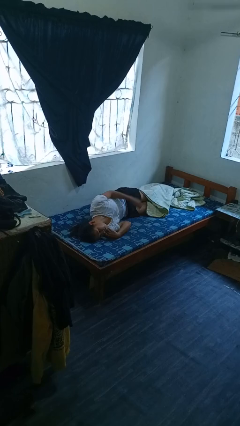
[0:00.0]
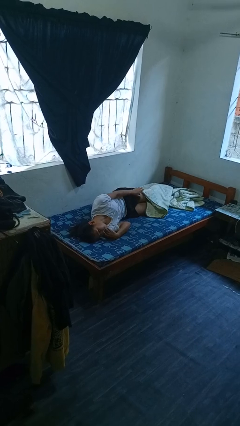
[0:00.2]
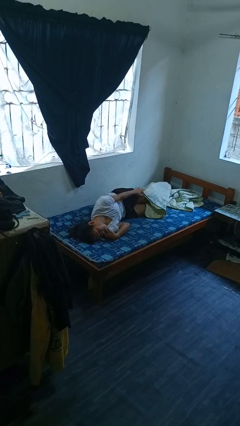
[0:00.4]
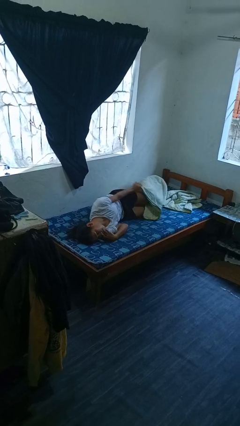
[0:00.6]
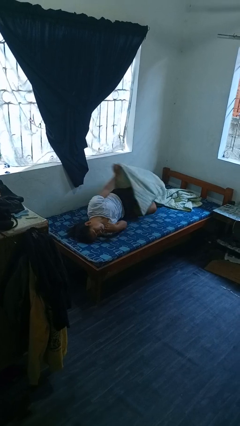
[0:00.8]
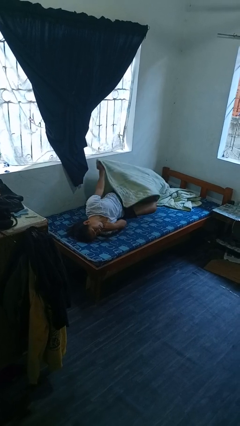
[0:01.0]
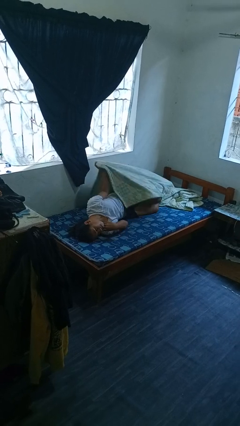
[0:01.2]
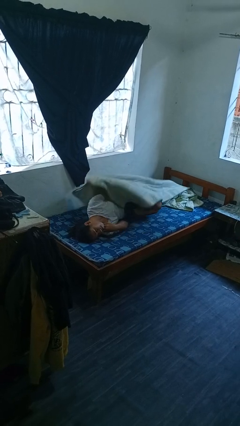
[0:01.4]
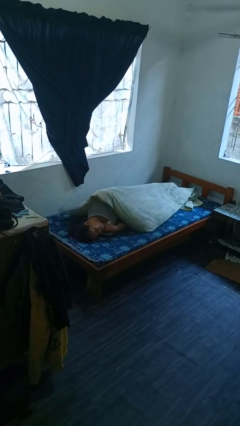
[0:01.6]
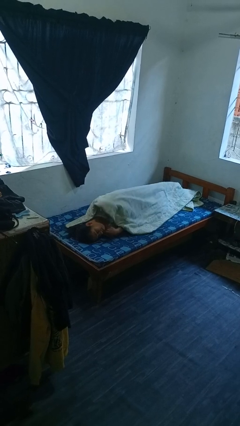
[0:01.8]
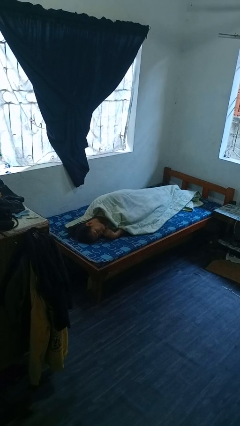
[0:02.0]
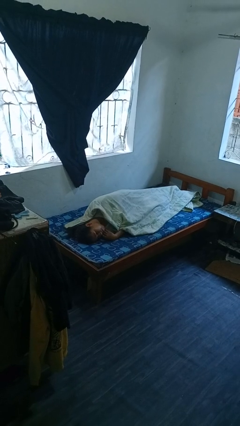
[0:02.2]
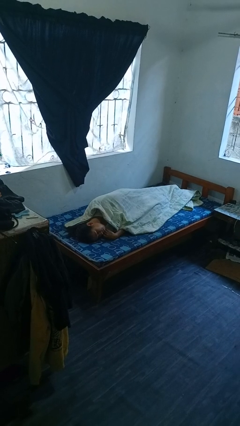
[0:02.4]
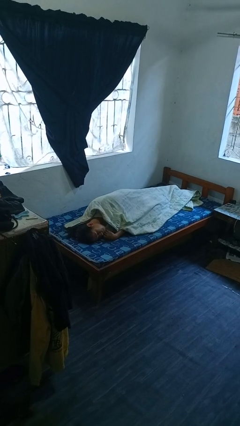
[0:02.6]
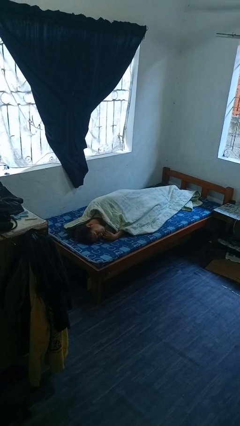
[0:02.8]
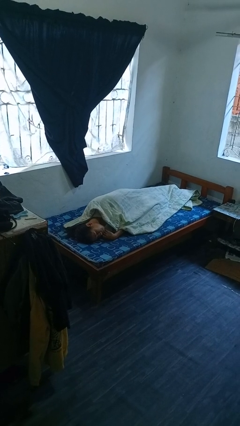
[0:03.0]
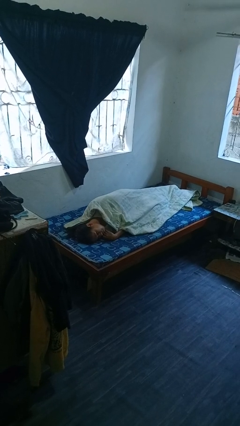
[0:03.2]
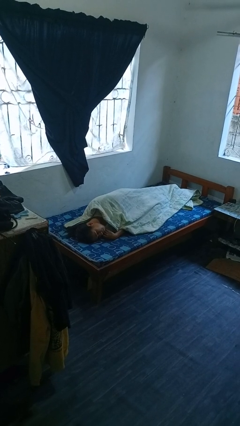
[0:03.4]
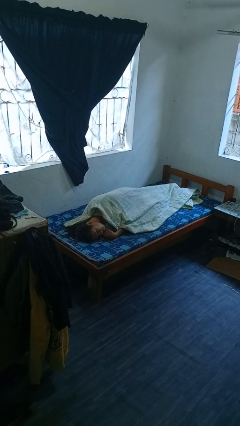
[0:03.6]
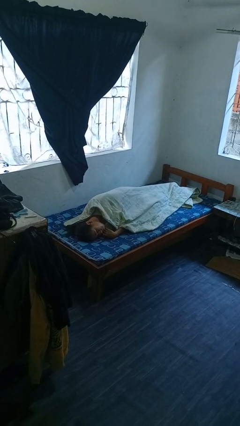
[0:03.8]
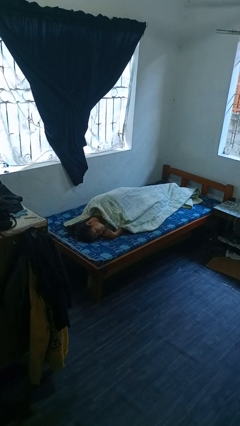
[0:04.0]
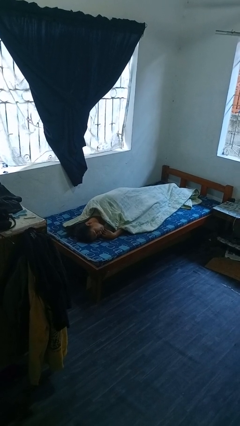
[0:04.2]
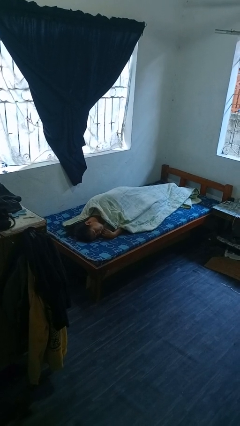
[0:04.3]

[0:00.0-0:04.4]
person covers with bedsheets

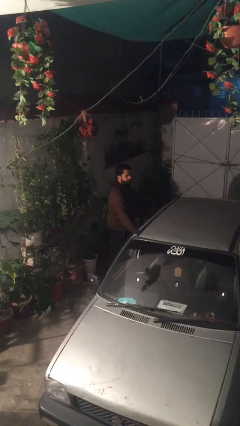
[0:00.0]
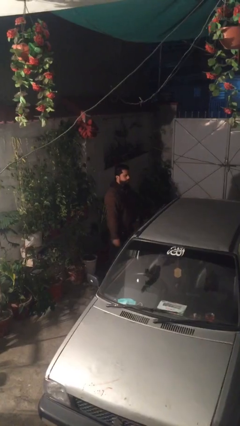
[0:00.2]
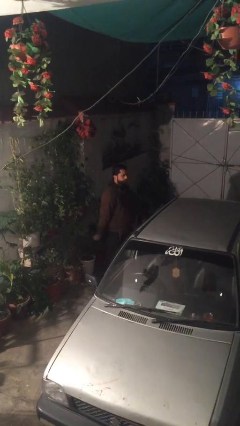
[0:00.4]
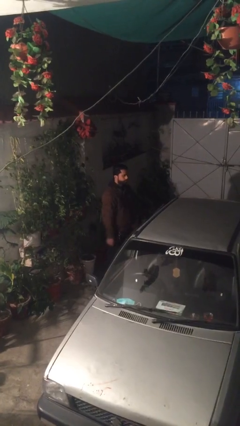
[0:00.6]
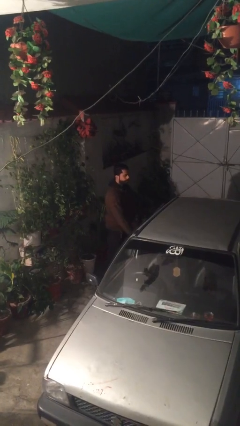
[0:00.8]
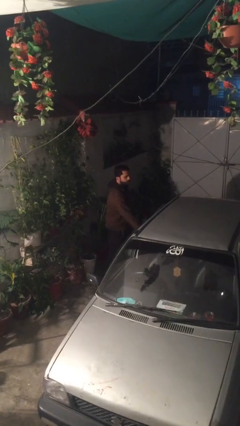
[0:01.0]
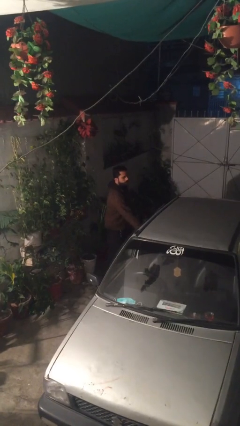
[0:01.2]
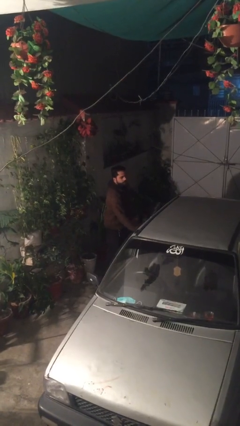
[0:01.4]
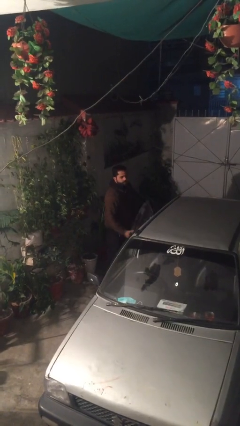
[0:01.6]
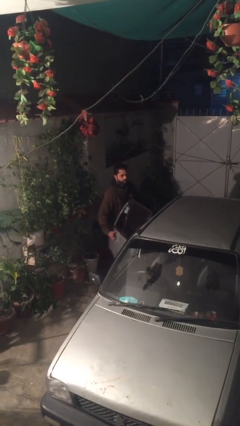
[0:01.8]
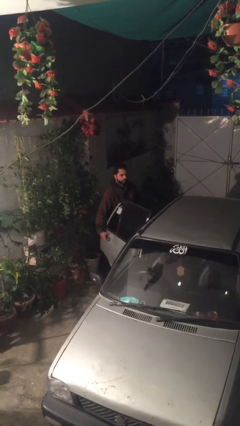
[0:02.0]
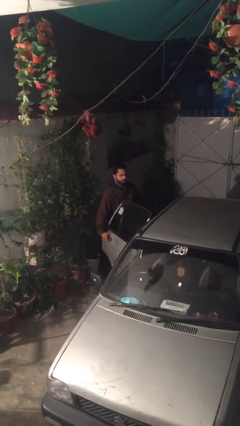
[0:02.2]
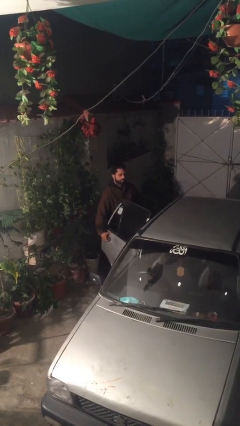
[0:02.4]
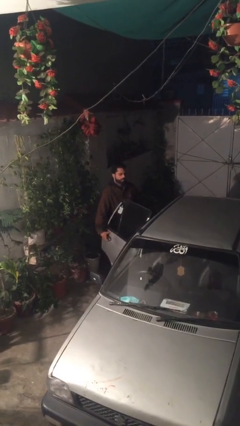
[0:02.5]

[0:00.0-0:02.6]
person opens car door

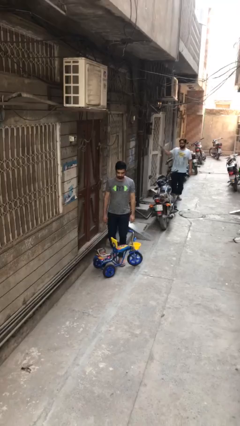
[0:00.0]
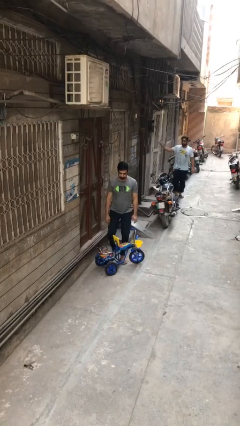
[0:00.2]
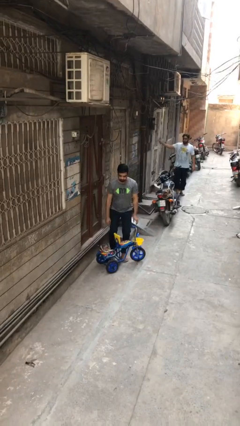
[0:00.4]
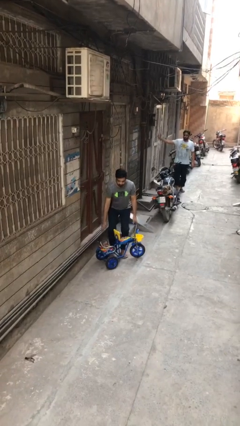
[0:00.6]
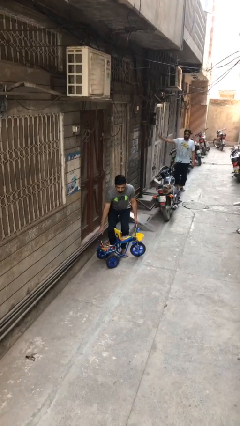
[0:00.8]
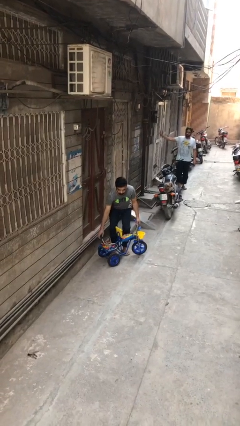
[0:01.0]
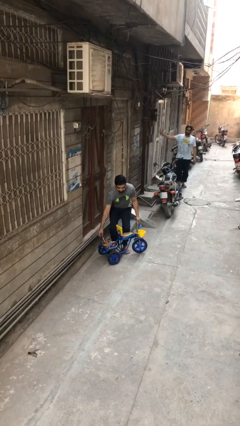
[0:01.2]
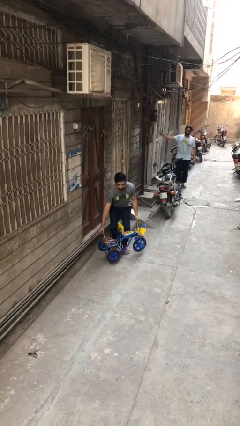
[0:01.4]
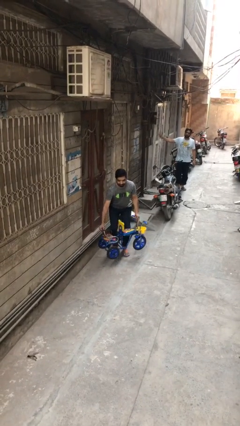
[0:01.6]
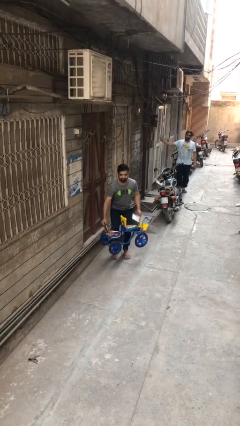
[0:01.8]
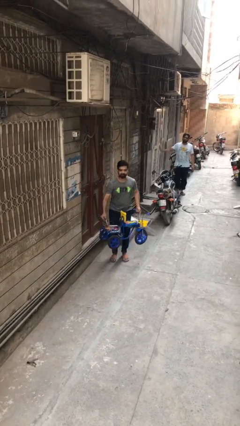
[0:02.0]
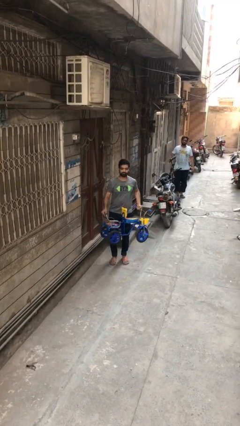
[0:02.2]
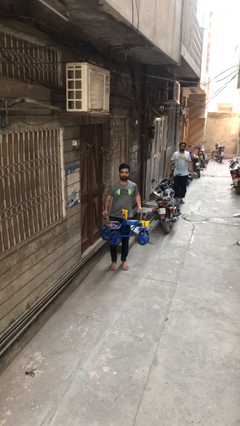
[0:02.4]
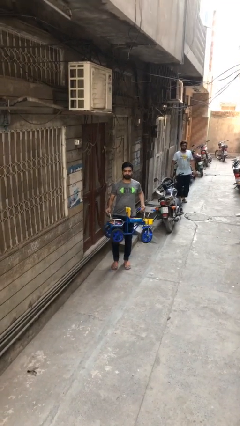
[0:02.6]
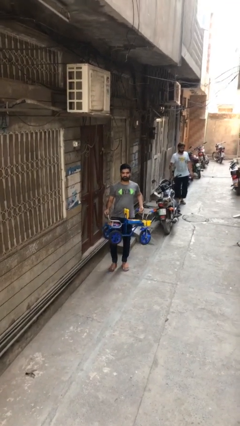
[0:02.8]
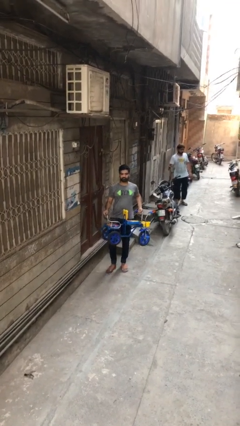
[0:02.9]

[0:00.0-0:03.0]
person picks up object from floor

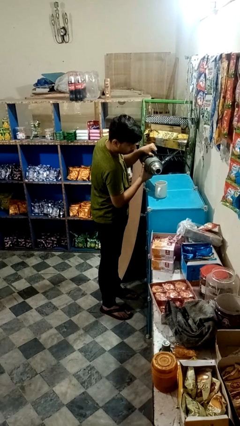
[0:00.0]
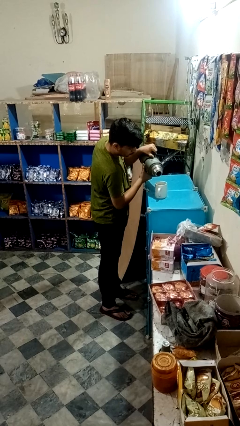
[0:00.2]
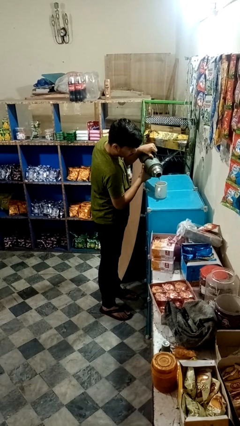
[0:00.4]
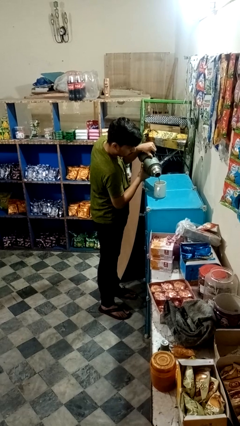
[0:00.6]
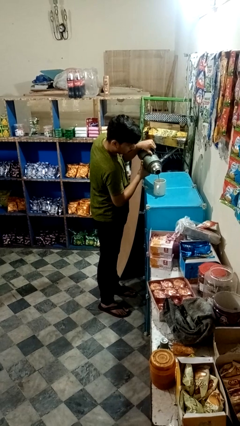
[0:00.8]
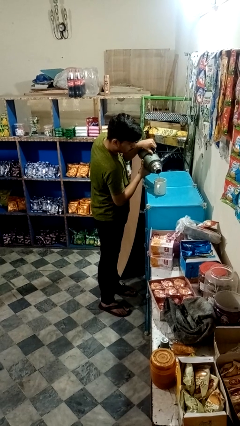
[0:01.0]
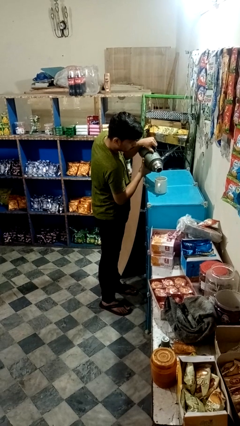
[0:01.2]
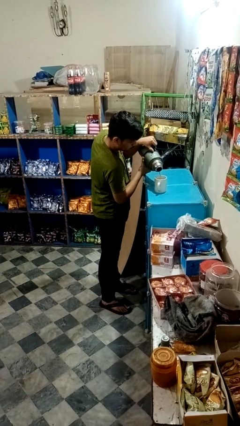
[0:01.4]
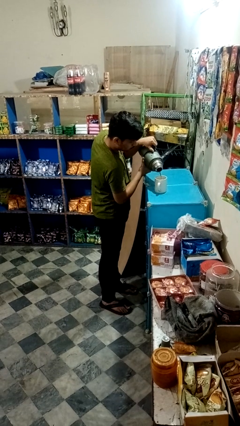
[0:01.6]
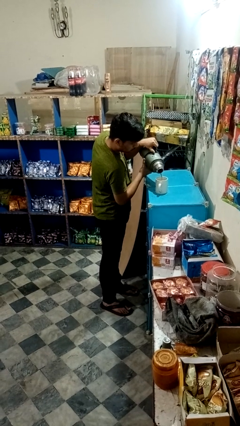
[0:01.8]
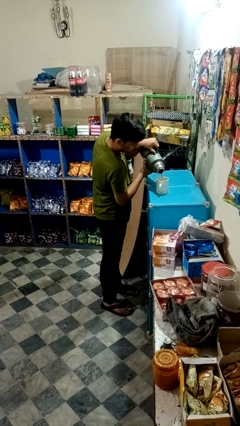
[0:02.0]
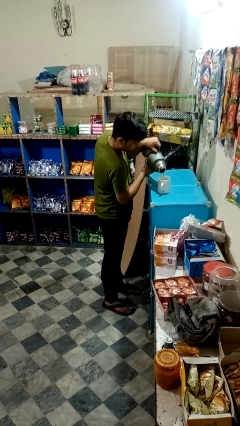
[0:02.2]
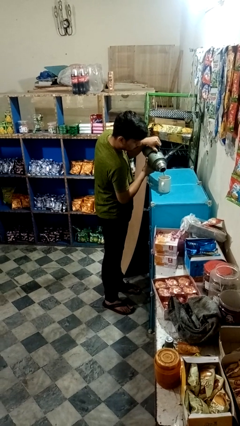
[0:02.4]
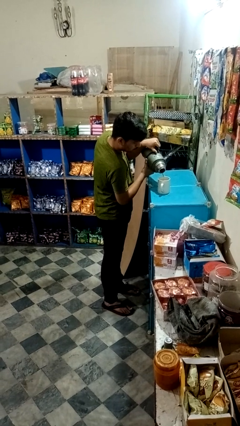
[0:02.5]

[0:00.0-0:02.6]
person pours coffee into mug

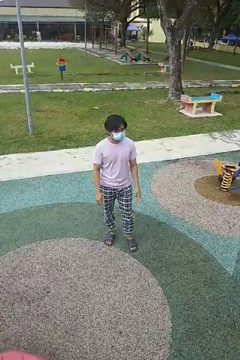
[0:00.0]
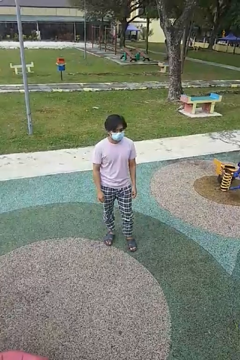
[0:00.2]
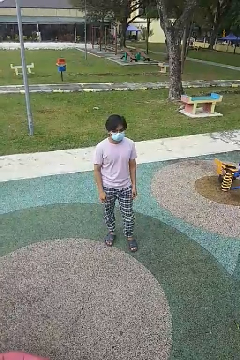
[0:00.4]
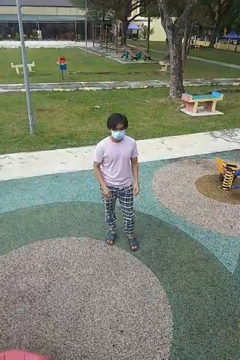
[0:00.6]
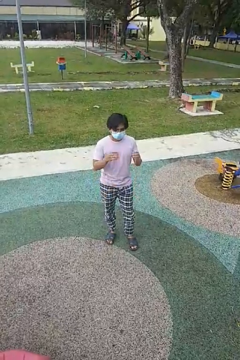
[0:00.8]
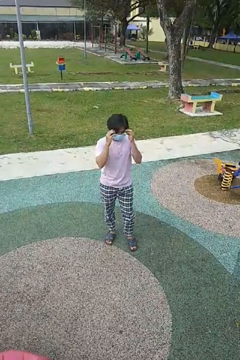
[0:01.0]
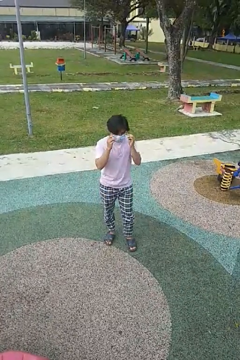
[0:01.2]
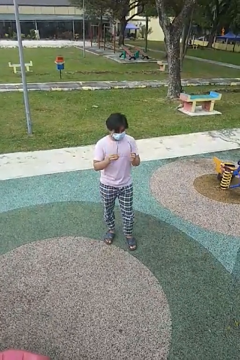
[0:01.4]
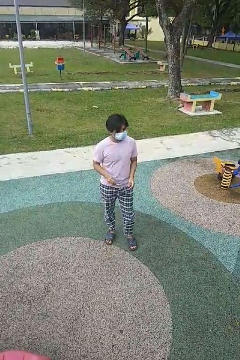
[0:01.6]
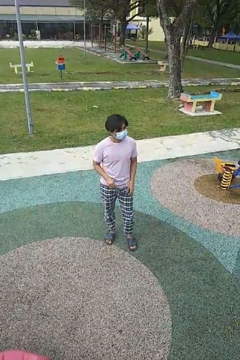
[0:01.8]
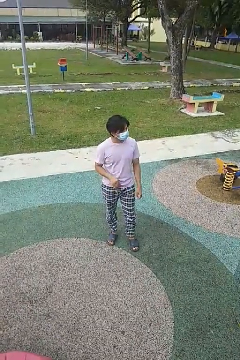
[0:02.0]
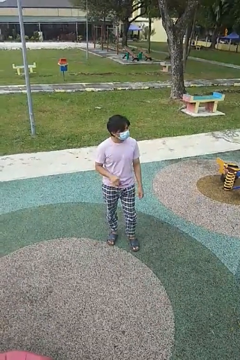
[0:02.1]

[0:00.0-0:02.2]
person takes off glasses

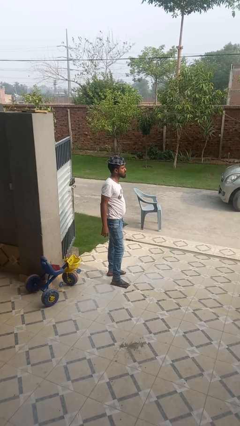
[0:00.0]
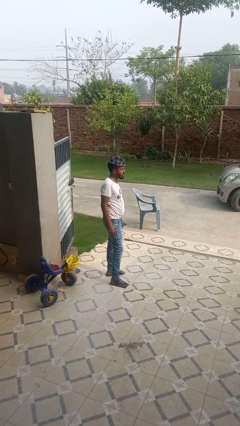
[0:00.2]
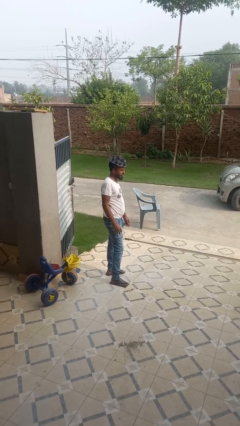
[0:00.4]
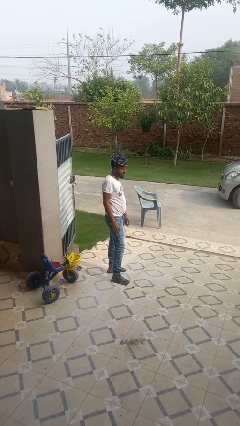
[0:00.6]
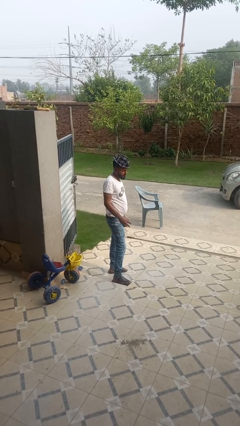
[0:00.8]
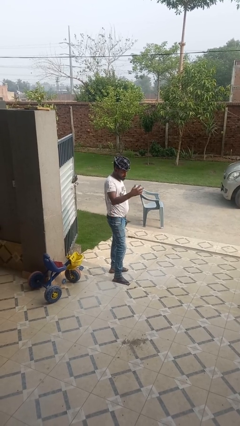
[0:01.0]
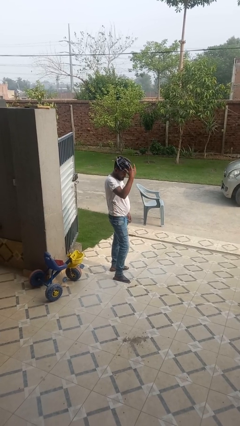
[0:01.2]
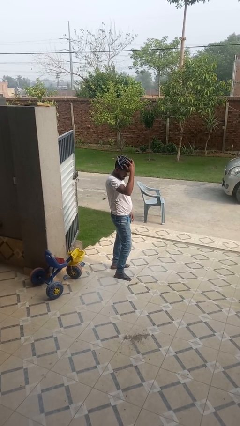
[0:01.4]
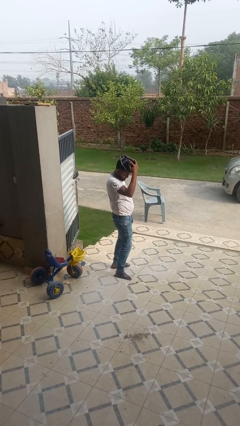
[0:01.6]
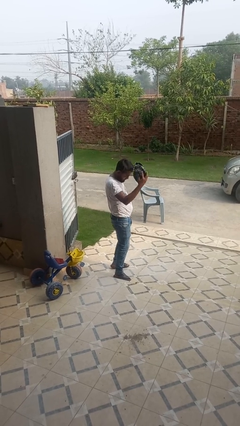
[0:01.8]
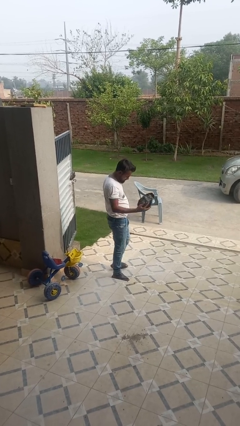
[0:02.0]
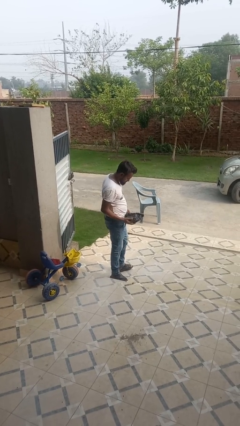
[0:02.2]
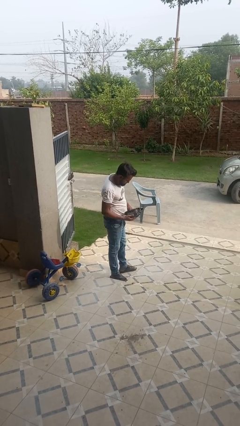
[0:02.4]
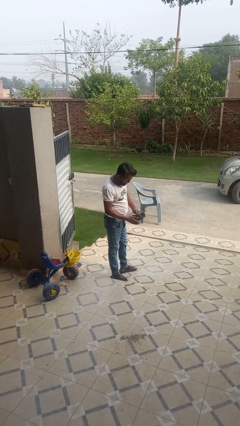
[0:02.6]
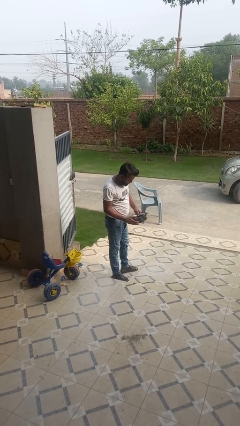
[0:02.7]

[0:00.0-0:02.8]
person takes off hat
